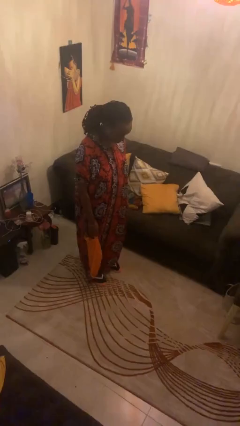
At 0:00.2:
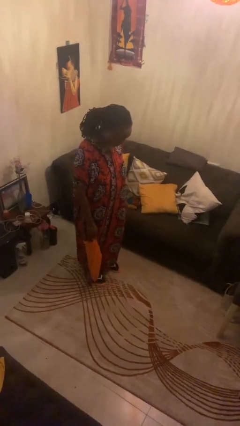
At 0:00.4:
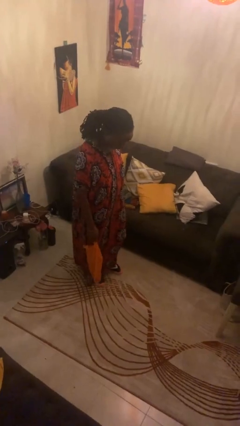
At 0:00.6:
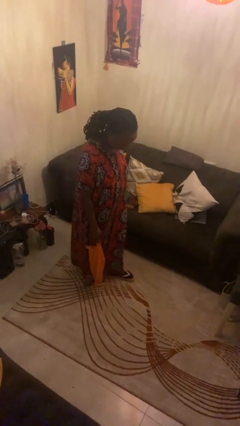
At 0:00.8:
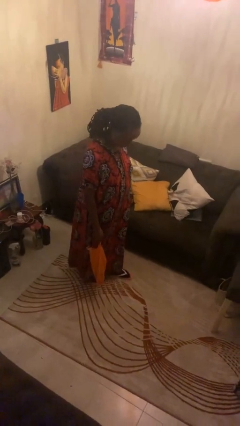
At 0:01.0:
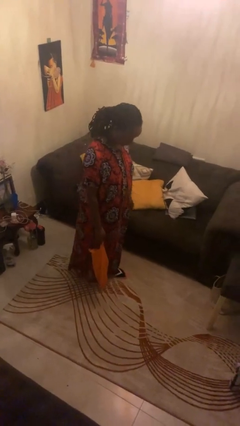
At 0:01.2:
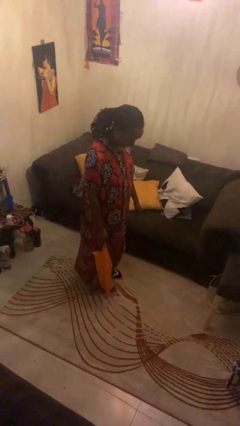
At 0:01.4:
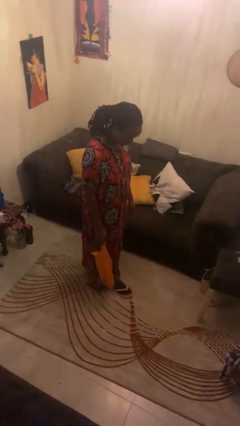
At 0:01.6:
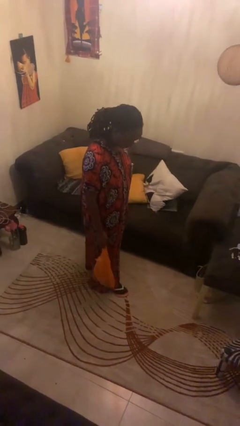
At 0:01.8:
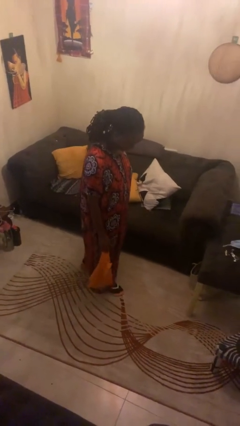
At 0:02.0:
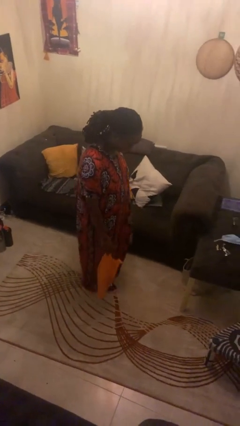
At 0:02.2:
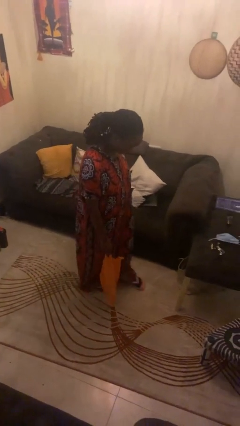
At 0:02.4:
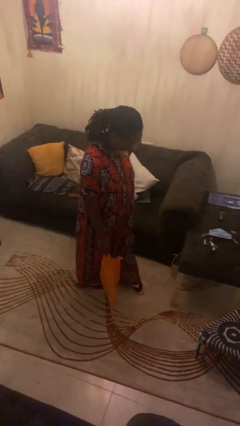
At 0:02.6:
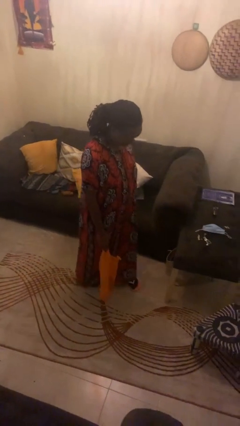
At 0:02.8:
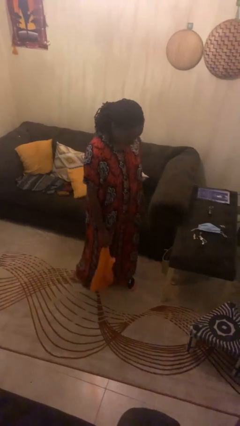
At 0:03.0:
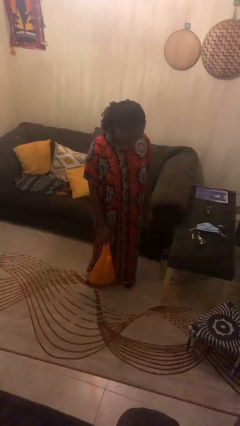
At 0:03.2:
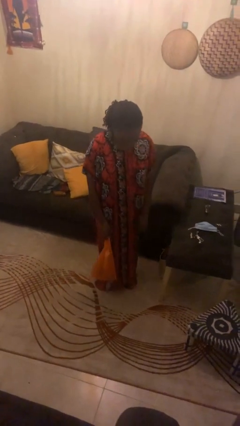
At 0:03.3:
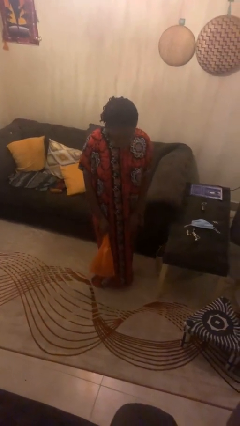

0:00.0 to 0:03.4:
person carries groceries

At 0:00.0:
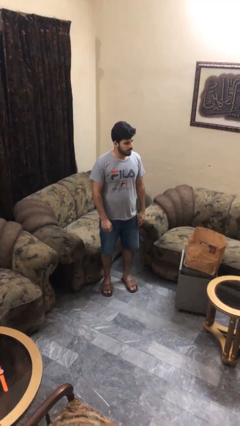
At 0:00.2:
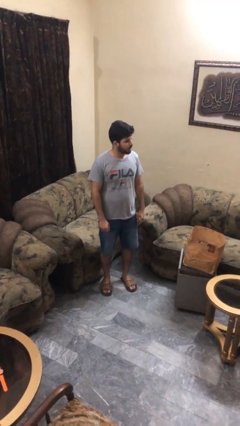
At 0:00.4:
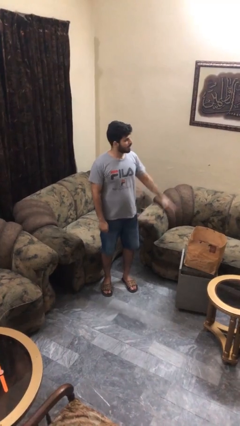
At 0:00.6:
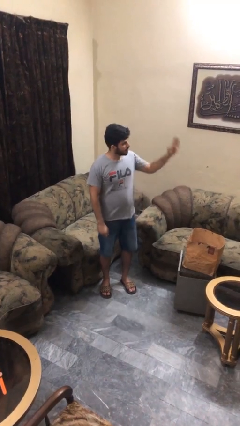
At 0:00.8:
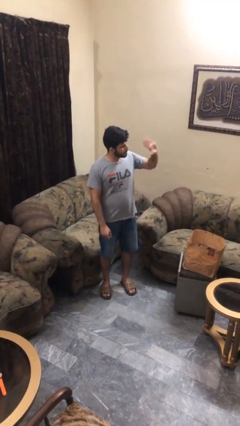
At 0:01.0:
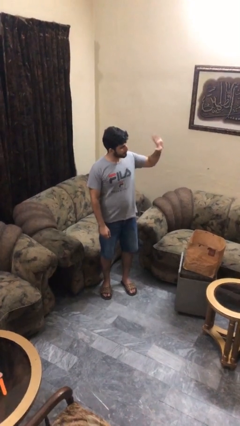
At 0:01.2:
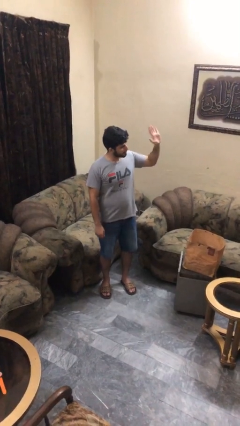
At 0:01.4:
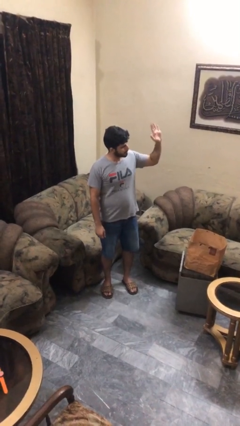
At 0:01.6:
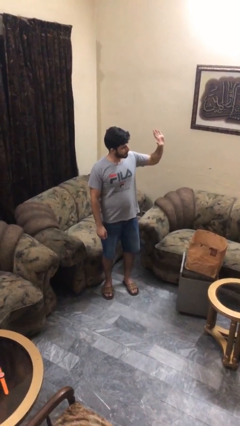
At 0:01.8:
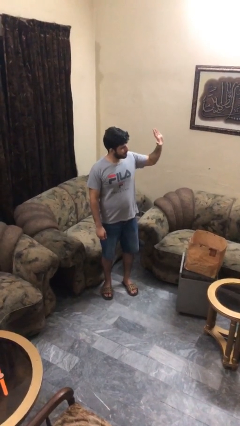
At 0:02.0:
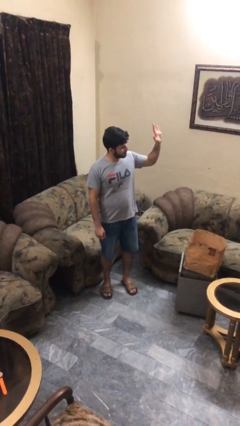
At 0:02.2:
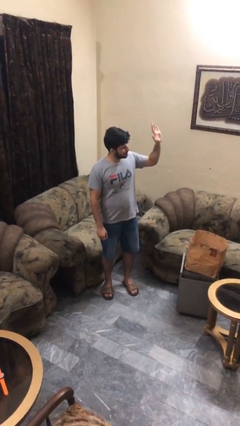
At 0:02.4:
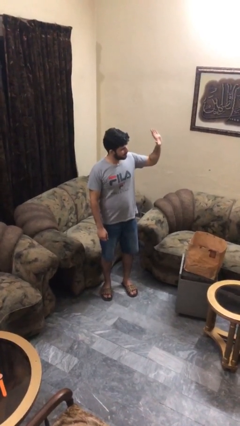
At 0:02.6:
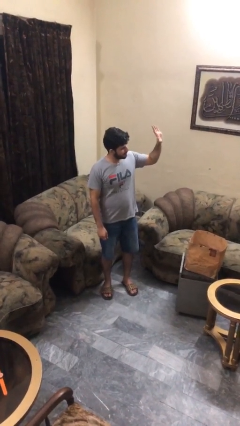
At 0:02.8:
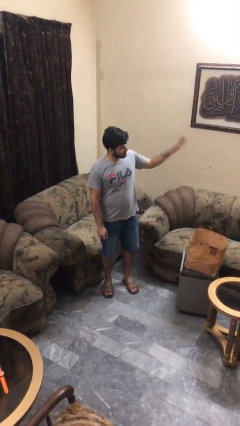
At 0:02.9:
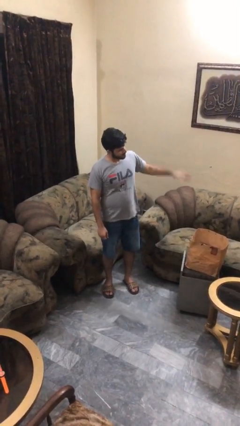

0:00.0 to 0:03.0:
person waves at person

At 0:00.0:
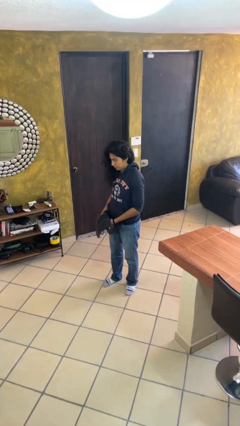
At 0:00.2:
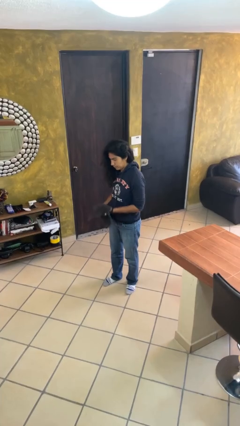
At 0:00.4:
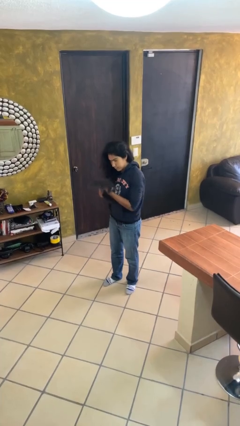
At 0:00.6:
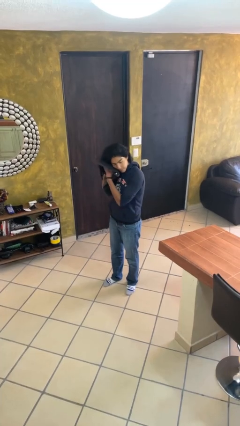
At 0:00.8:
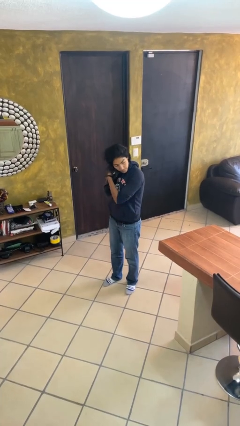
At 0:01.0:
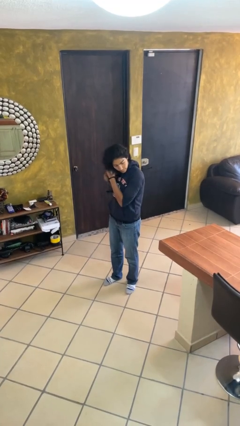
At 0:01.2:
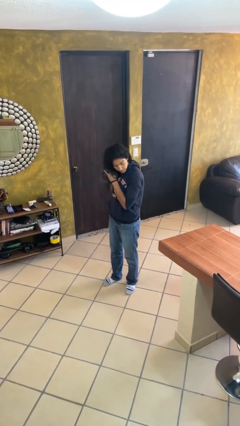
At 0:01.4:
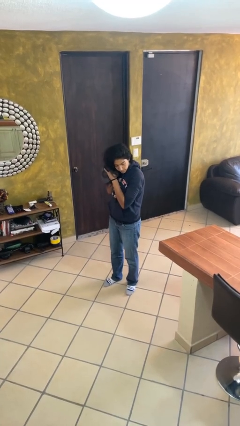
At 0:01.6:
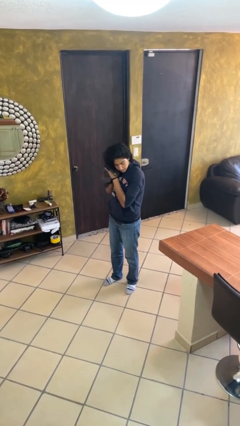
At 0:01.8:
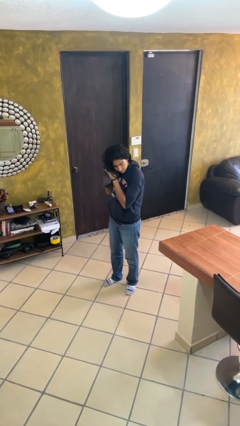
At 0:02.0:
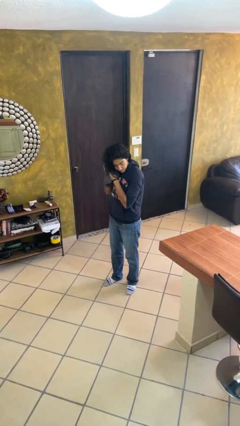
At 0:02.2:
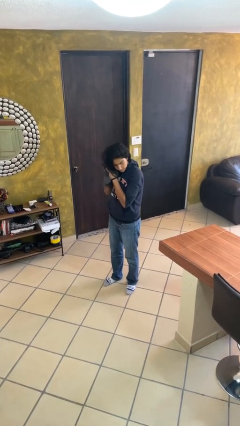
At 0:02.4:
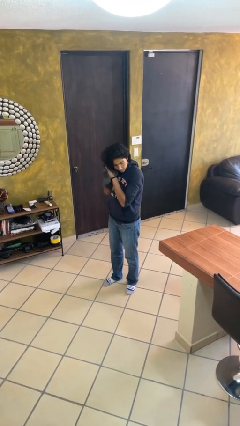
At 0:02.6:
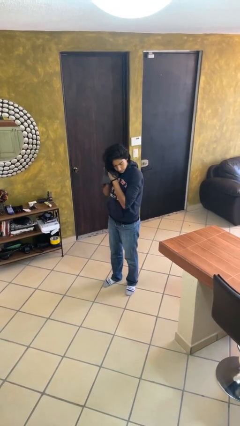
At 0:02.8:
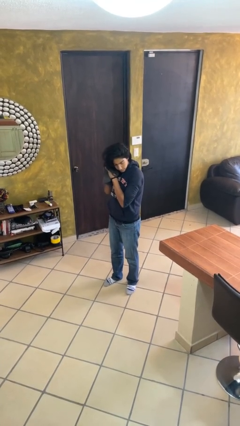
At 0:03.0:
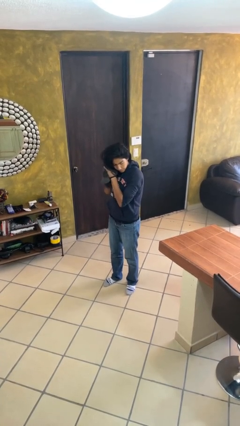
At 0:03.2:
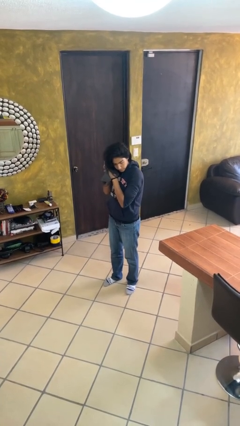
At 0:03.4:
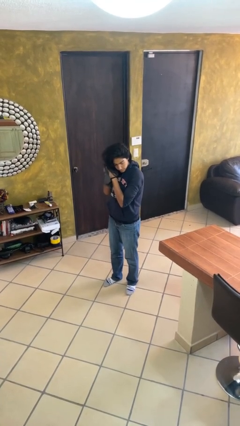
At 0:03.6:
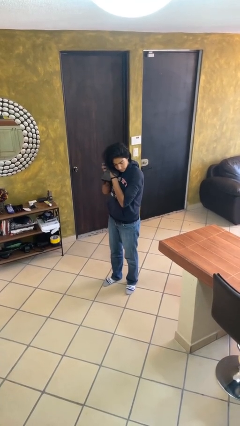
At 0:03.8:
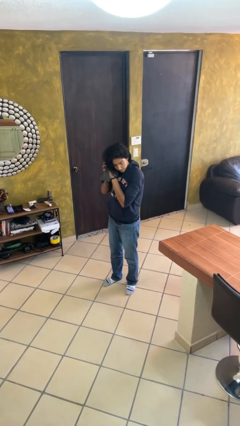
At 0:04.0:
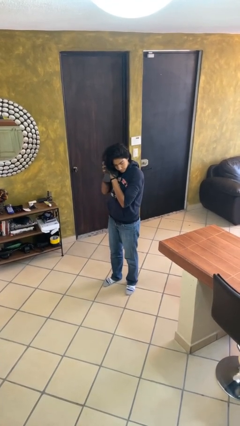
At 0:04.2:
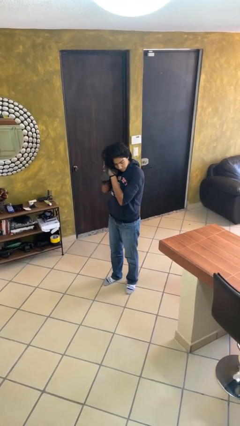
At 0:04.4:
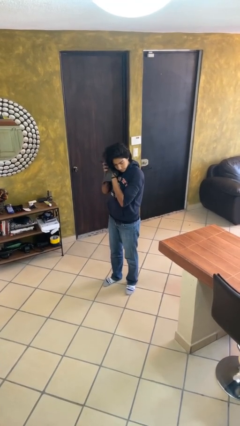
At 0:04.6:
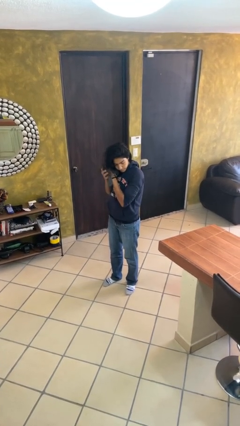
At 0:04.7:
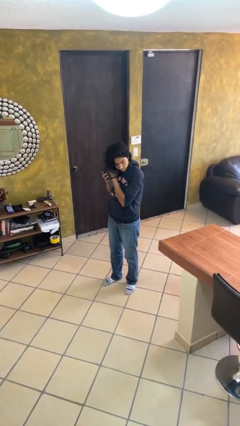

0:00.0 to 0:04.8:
person dries hair with towel

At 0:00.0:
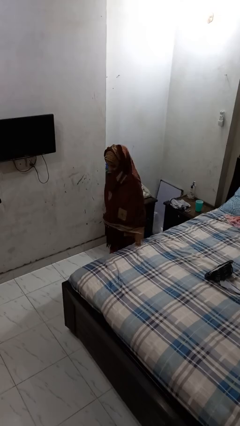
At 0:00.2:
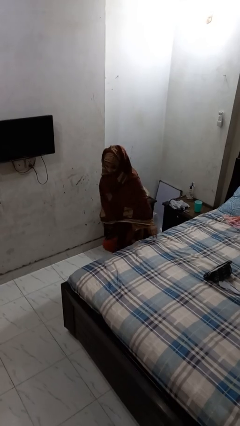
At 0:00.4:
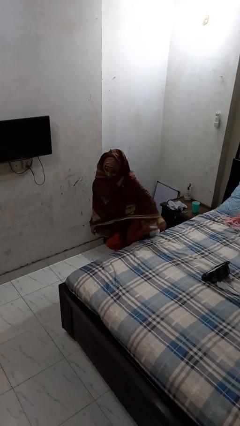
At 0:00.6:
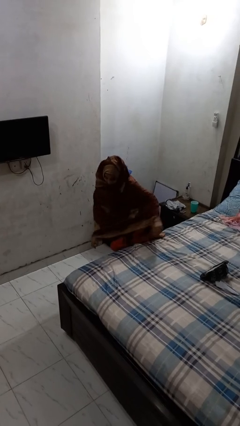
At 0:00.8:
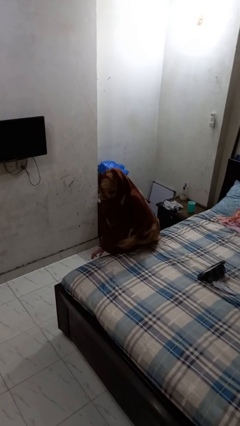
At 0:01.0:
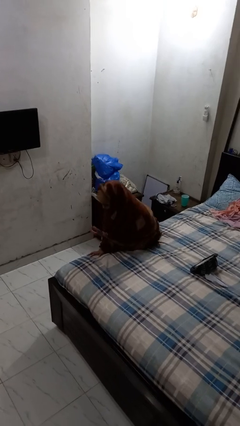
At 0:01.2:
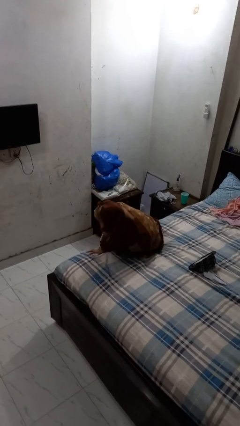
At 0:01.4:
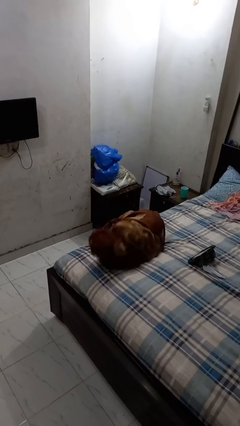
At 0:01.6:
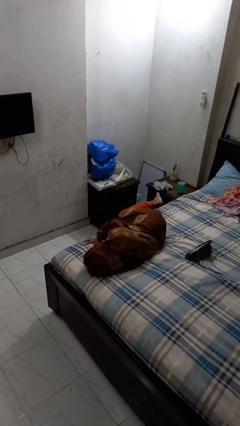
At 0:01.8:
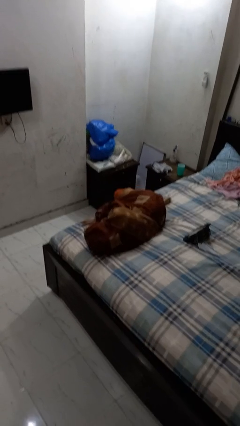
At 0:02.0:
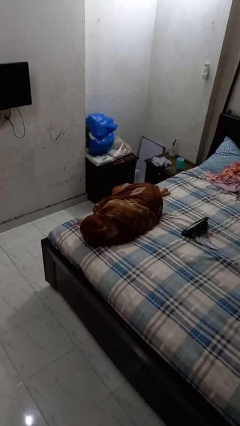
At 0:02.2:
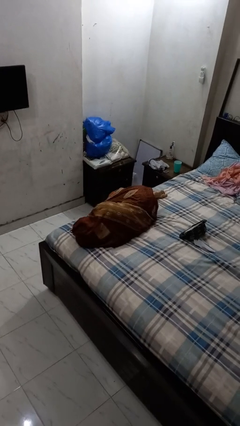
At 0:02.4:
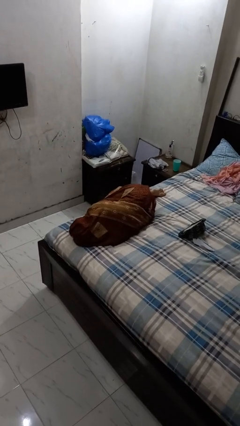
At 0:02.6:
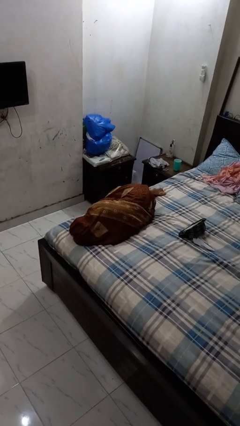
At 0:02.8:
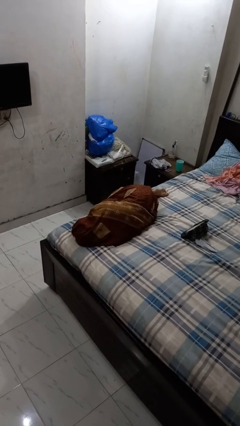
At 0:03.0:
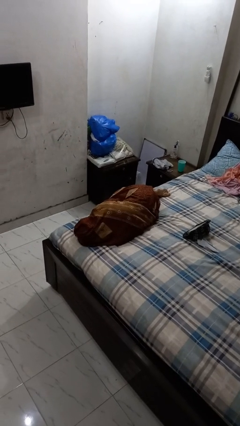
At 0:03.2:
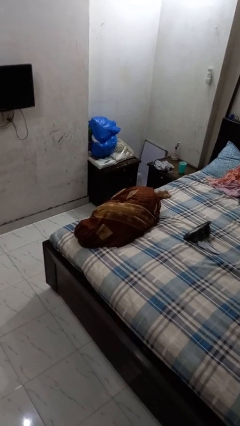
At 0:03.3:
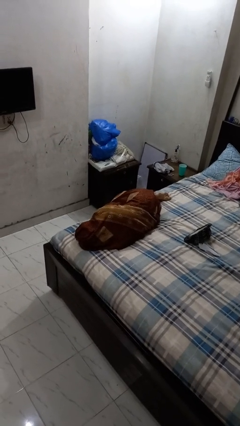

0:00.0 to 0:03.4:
person lies down on bed

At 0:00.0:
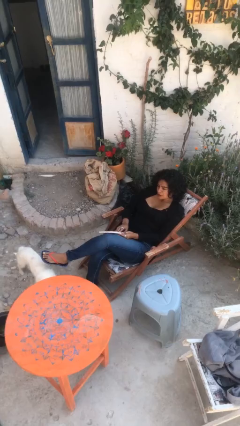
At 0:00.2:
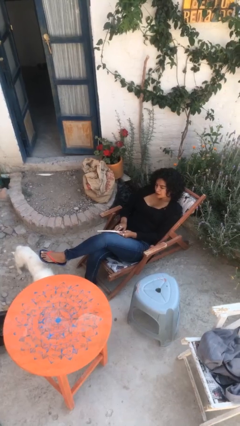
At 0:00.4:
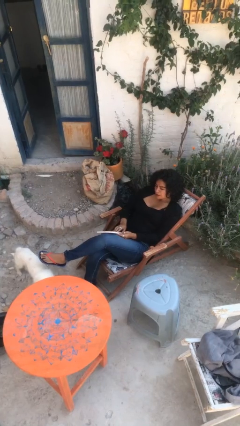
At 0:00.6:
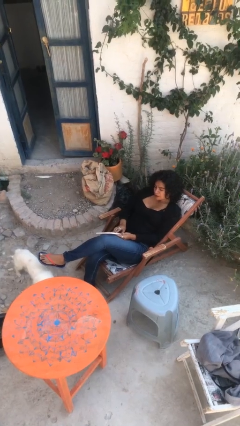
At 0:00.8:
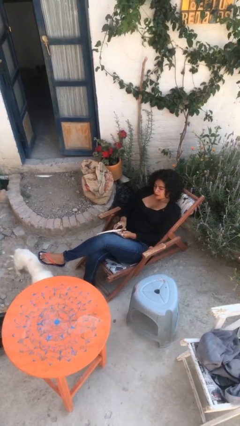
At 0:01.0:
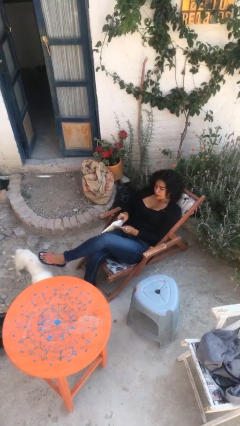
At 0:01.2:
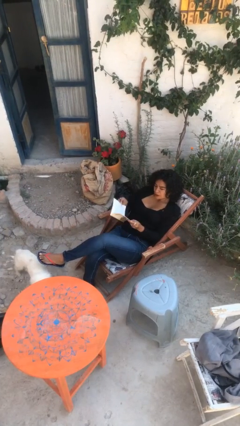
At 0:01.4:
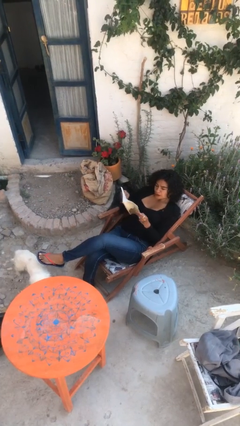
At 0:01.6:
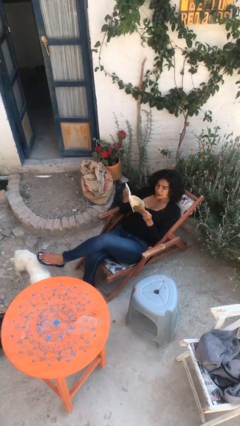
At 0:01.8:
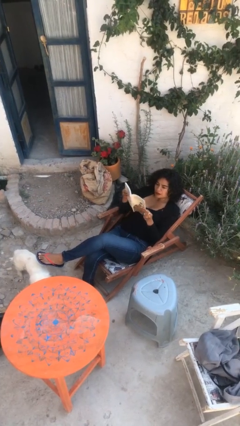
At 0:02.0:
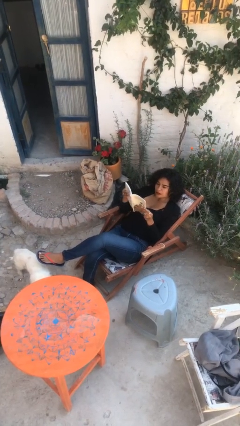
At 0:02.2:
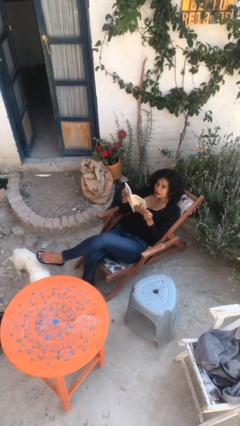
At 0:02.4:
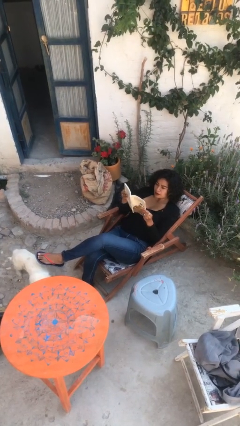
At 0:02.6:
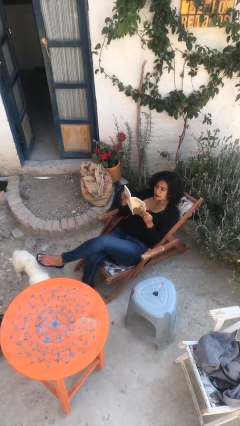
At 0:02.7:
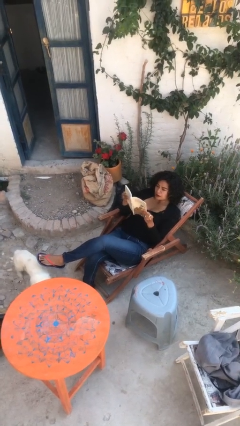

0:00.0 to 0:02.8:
person reads document
